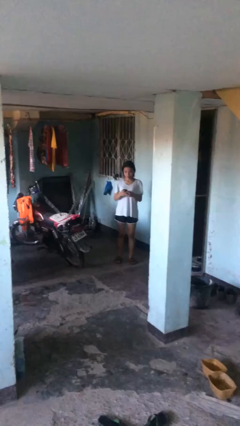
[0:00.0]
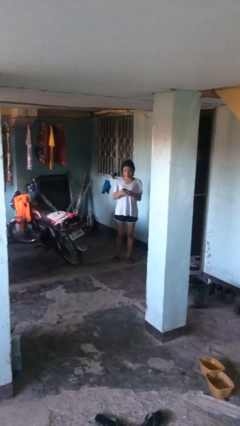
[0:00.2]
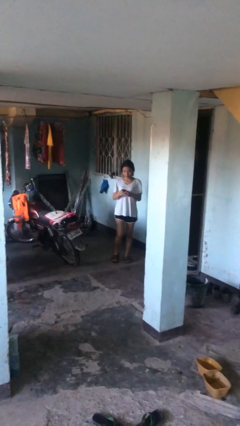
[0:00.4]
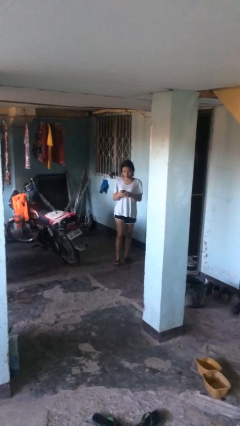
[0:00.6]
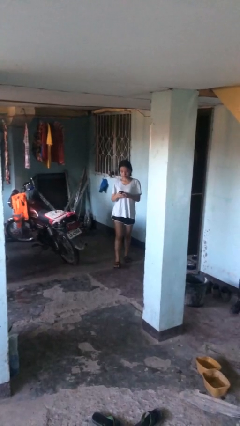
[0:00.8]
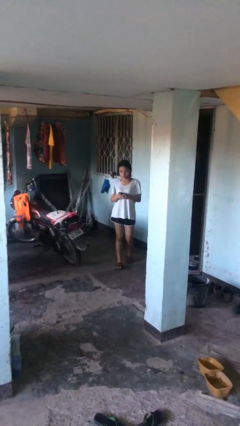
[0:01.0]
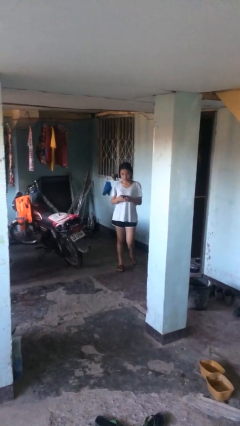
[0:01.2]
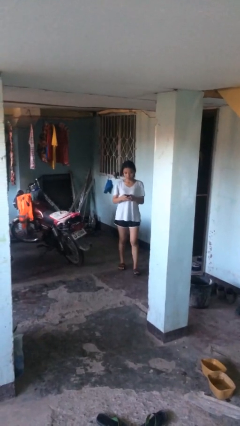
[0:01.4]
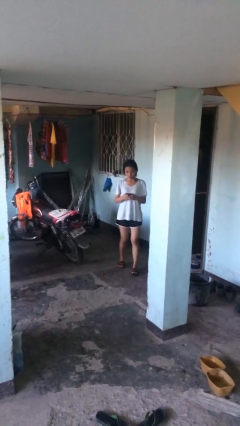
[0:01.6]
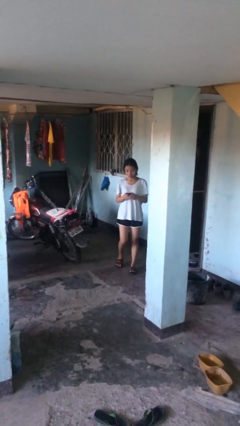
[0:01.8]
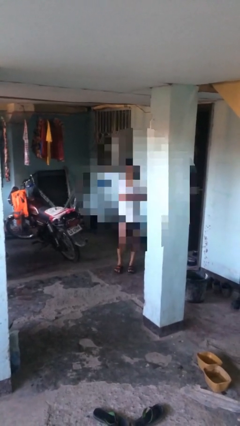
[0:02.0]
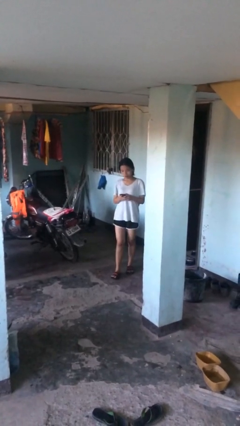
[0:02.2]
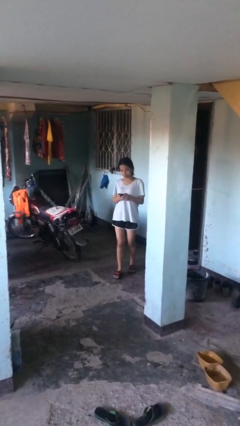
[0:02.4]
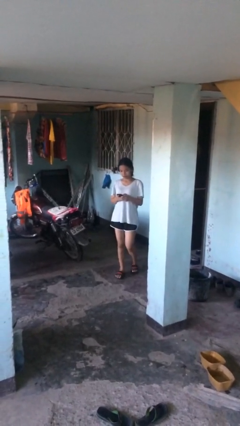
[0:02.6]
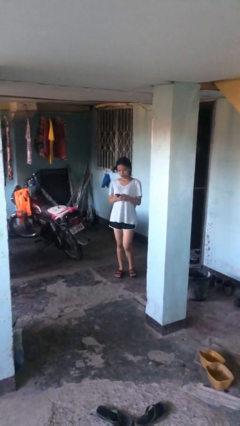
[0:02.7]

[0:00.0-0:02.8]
person texts on phone

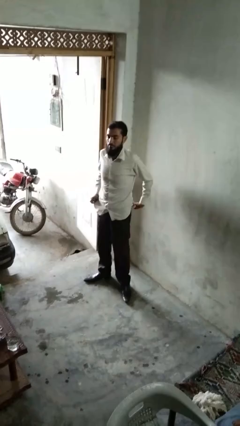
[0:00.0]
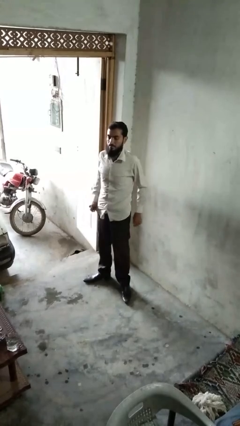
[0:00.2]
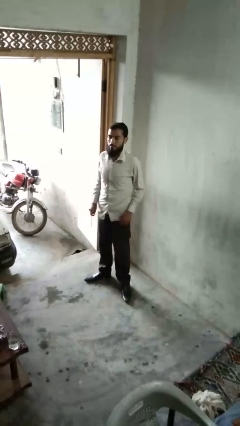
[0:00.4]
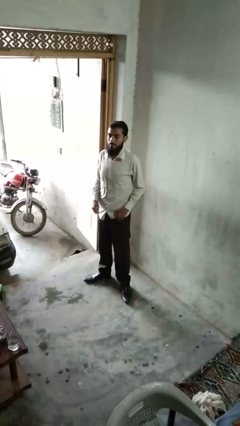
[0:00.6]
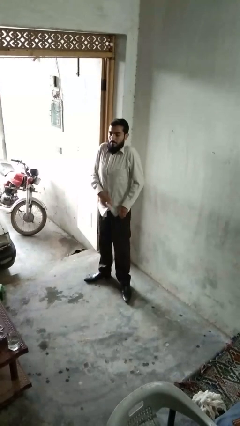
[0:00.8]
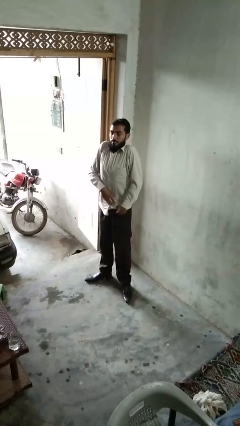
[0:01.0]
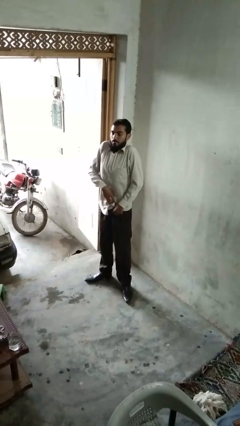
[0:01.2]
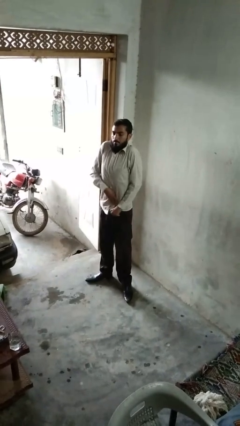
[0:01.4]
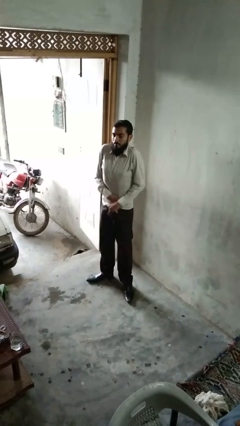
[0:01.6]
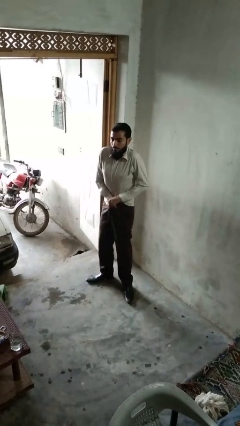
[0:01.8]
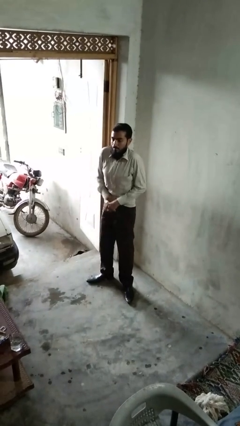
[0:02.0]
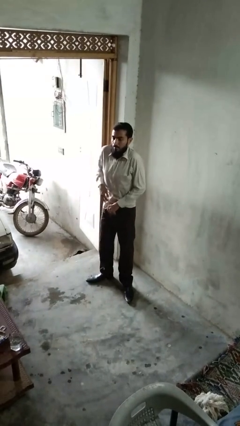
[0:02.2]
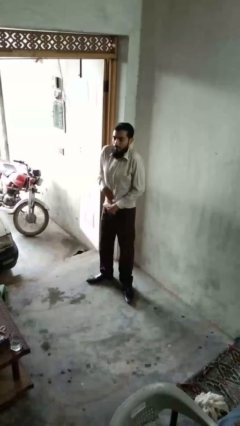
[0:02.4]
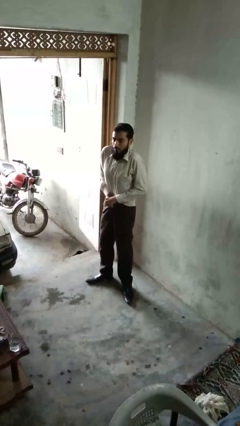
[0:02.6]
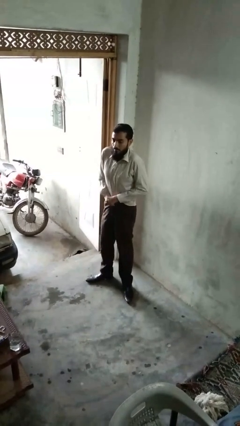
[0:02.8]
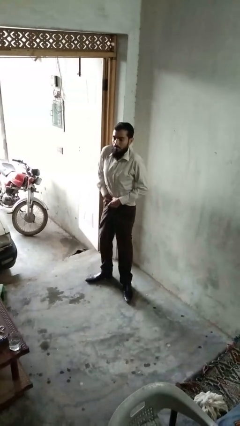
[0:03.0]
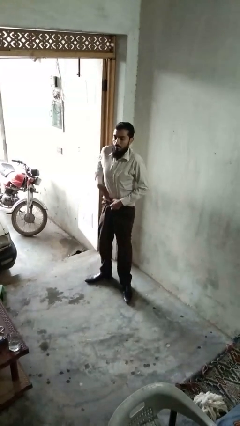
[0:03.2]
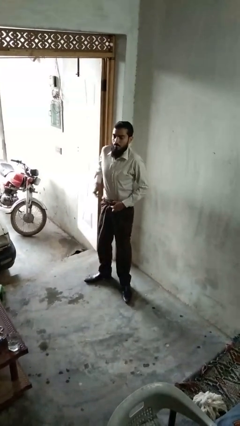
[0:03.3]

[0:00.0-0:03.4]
person tucks in shirt

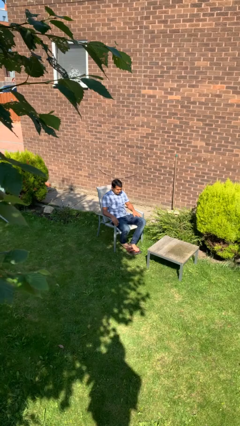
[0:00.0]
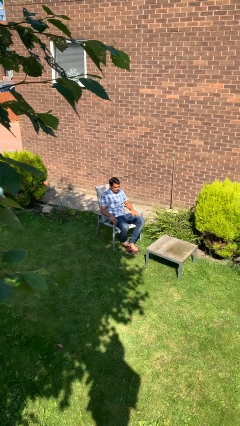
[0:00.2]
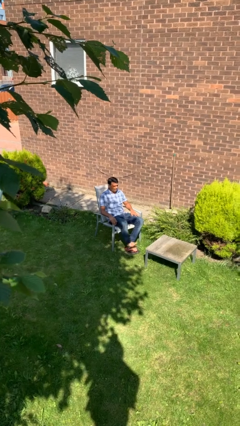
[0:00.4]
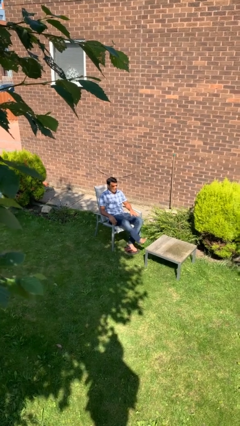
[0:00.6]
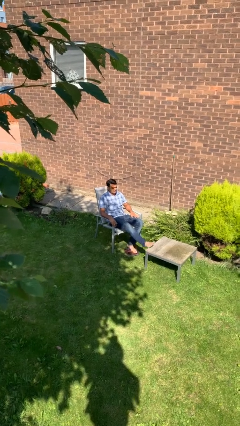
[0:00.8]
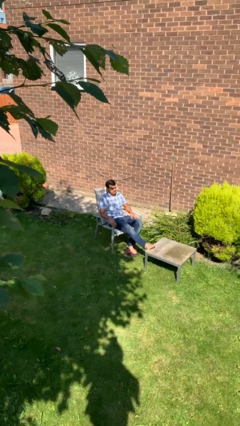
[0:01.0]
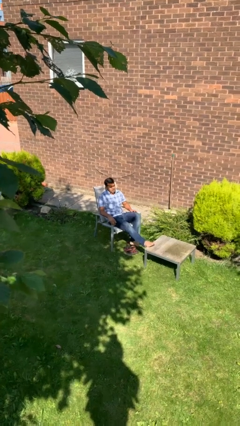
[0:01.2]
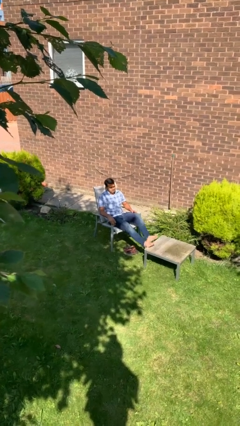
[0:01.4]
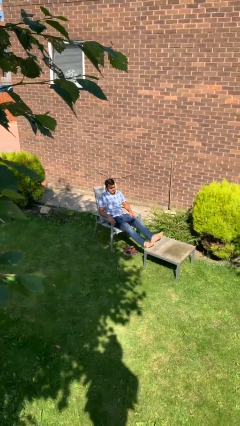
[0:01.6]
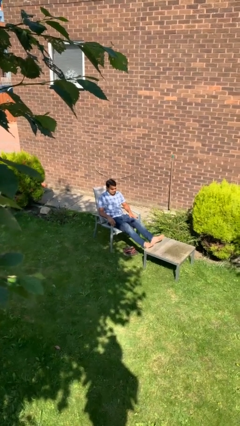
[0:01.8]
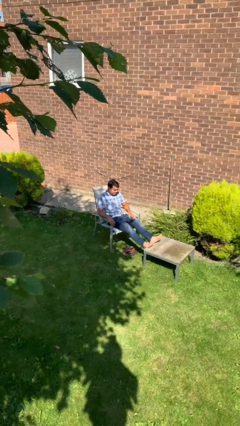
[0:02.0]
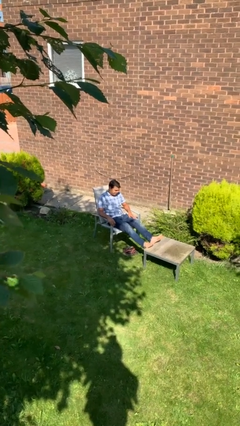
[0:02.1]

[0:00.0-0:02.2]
person puts feet up

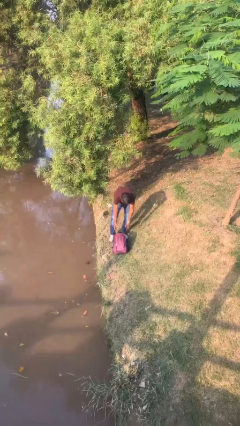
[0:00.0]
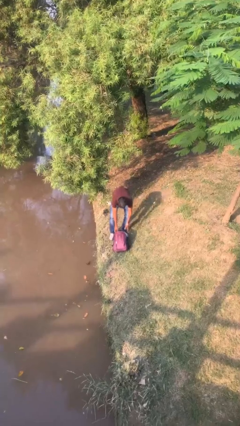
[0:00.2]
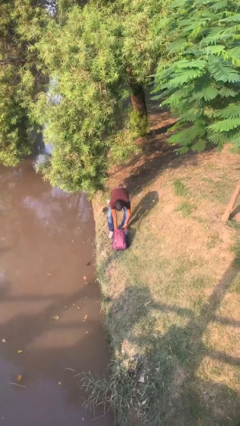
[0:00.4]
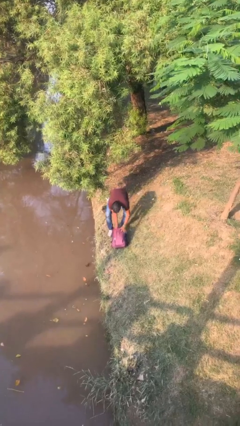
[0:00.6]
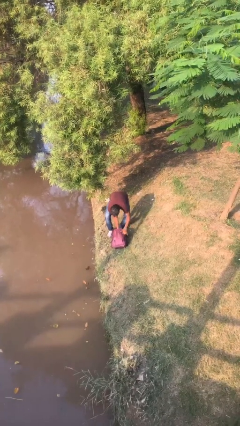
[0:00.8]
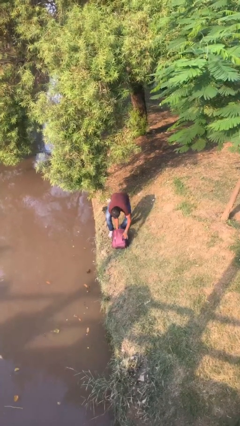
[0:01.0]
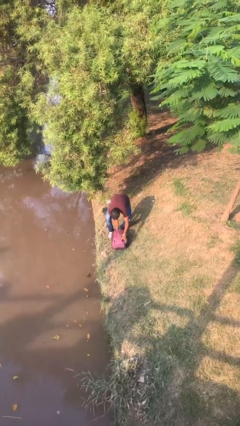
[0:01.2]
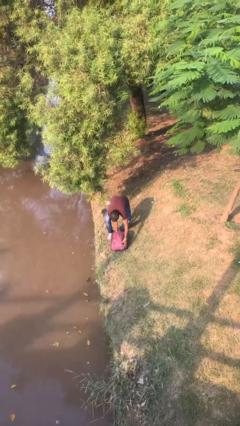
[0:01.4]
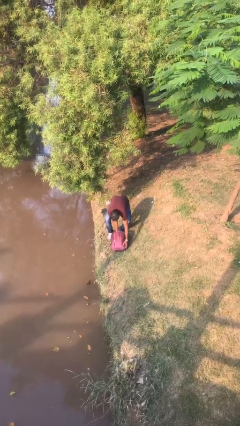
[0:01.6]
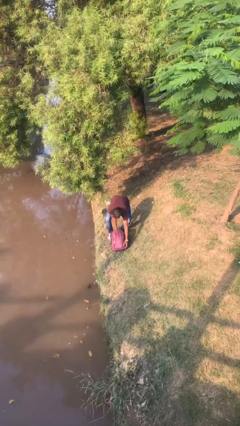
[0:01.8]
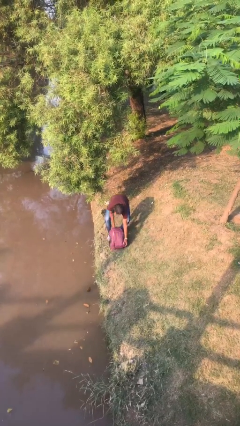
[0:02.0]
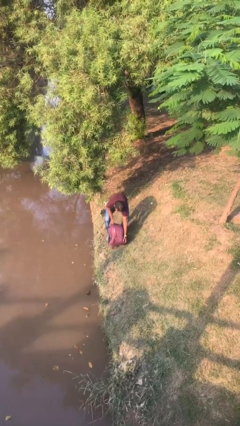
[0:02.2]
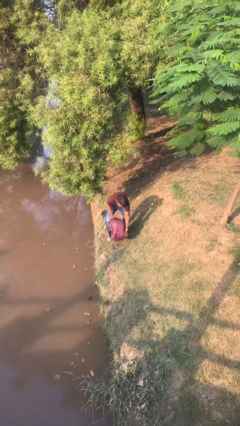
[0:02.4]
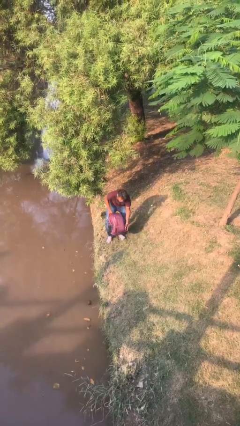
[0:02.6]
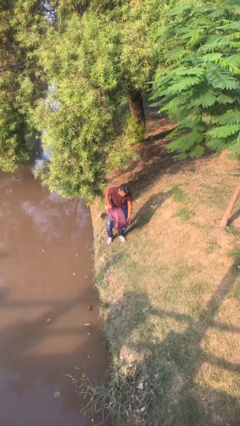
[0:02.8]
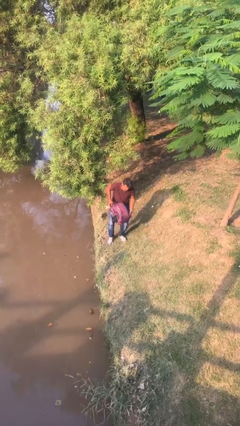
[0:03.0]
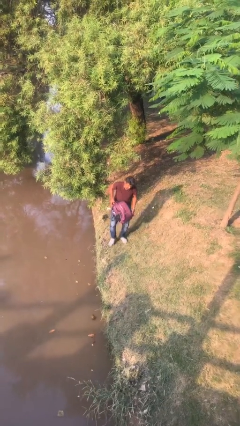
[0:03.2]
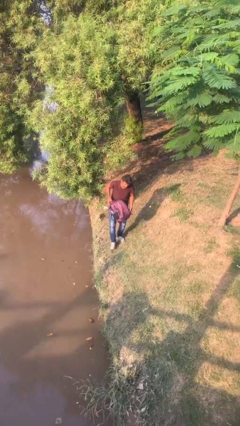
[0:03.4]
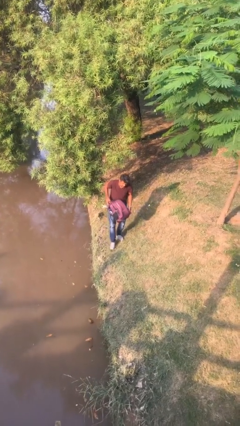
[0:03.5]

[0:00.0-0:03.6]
person picks up object from floor

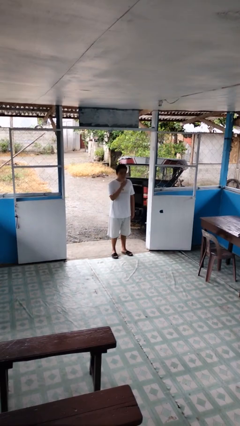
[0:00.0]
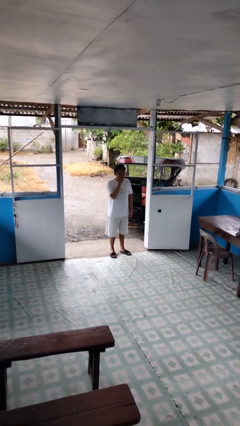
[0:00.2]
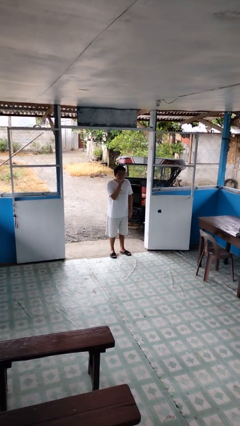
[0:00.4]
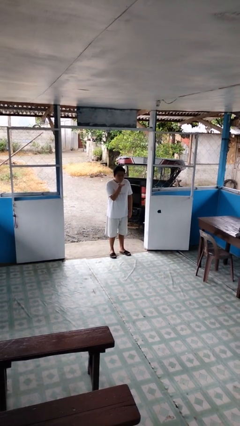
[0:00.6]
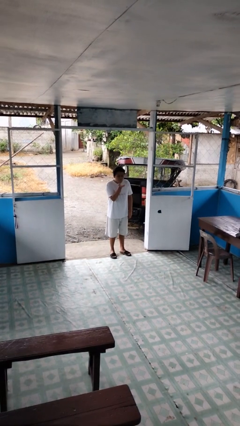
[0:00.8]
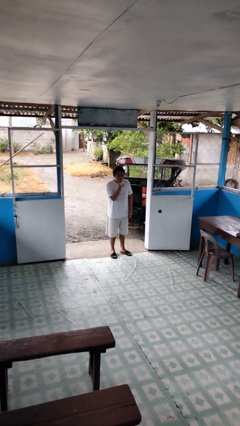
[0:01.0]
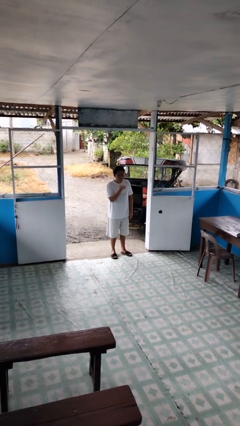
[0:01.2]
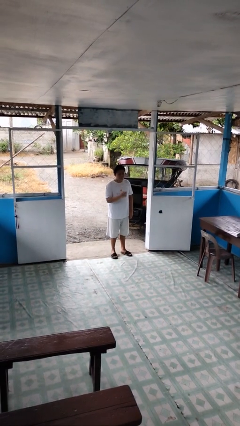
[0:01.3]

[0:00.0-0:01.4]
person gestures blow kiss

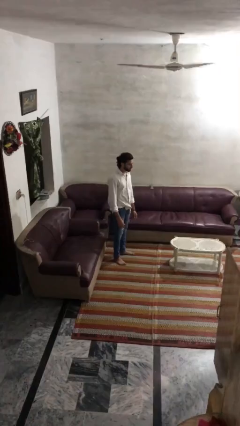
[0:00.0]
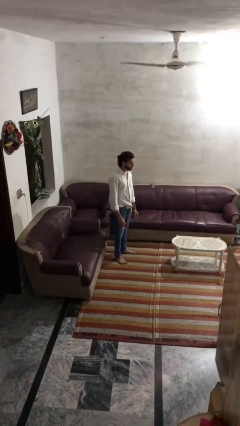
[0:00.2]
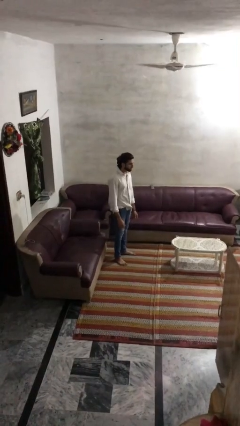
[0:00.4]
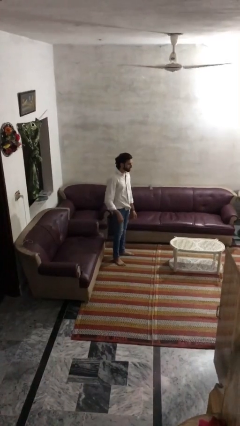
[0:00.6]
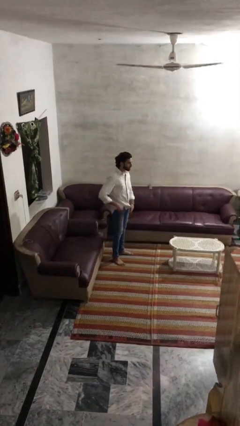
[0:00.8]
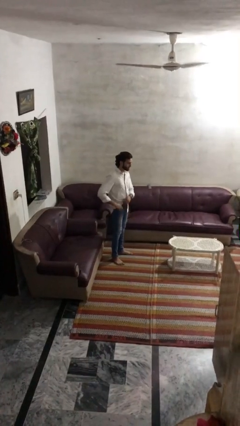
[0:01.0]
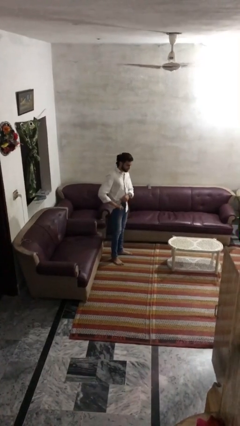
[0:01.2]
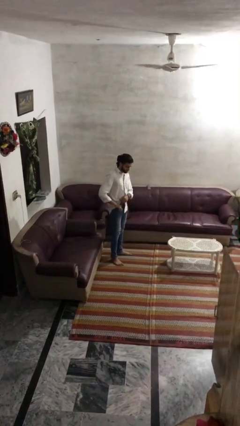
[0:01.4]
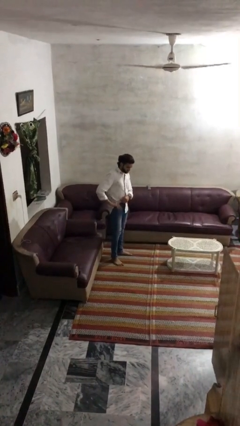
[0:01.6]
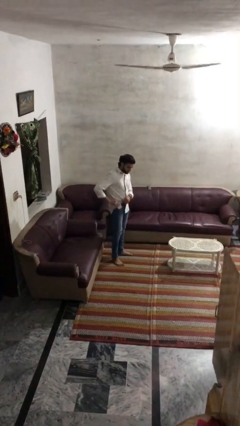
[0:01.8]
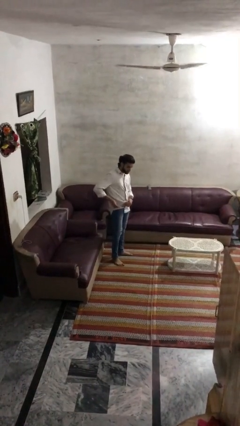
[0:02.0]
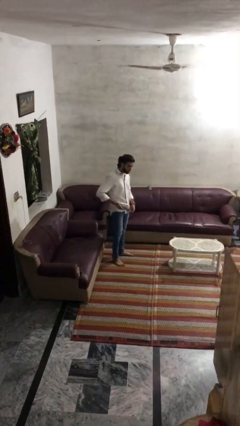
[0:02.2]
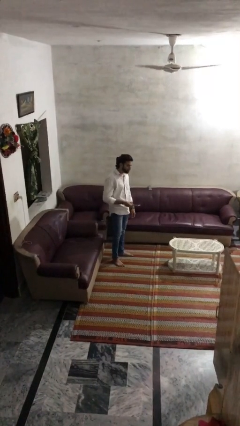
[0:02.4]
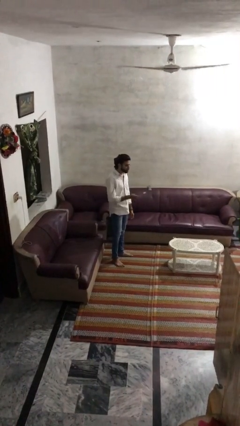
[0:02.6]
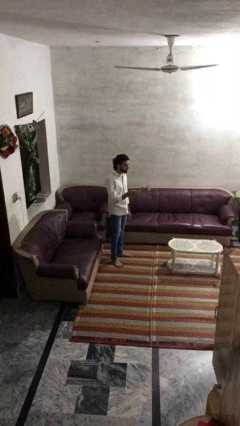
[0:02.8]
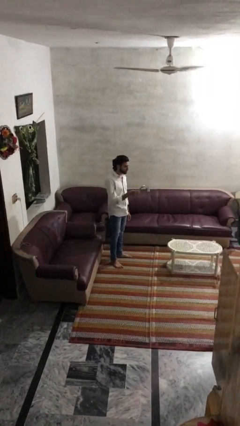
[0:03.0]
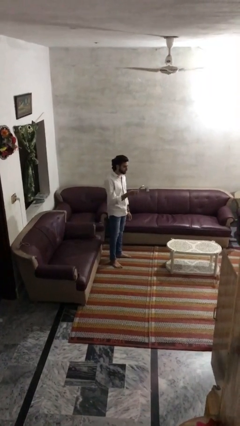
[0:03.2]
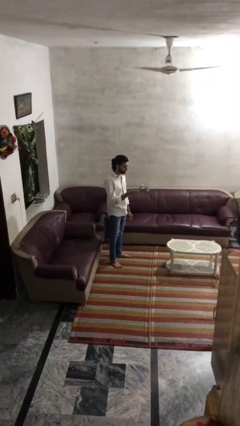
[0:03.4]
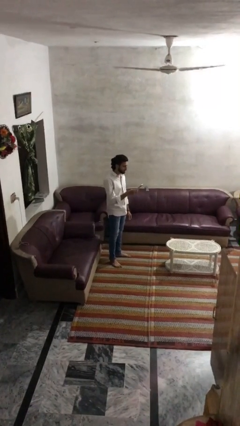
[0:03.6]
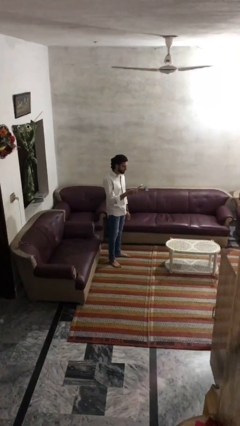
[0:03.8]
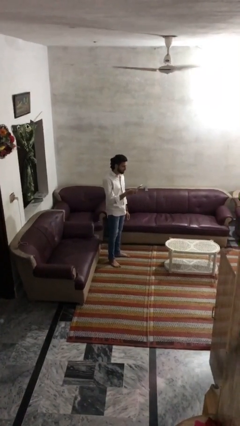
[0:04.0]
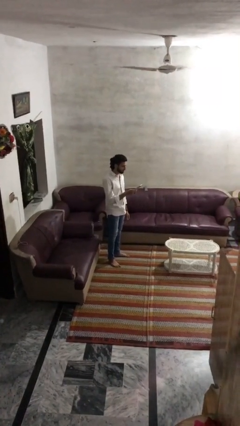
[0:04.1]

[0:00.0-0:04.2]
person takes phone from pocket
